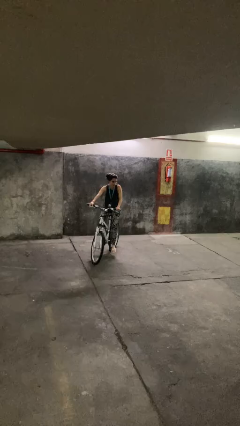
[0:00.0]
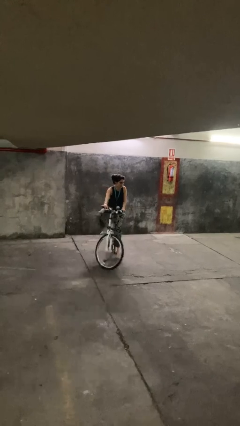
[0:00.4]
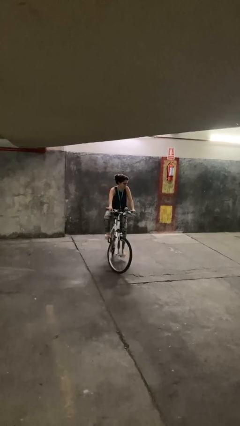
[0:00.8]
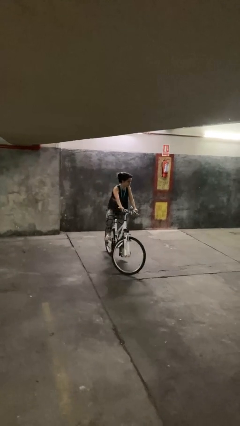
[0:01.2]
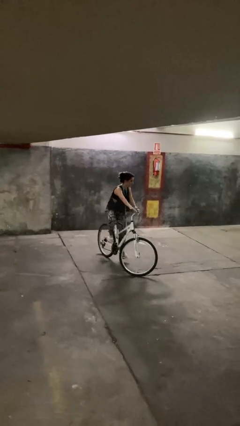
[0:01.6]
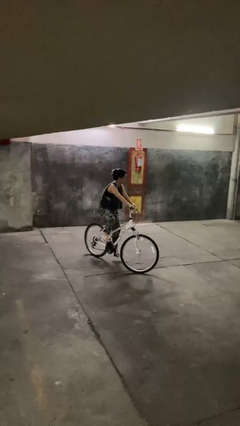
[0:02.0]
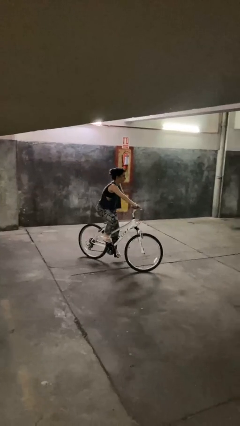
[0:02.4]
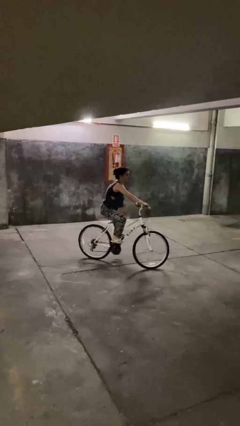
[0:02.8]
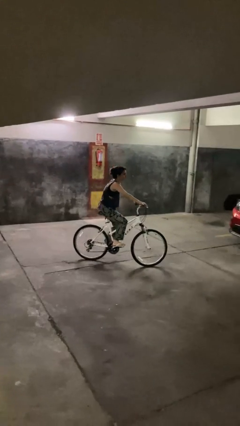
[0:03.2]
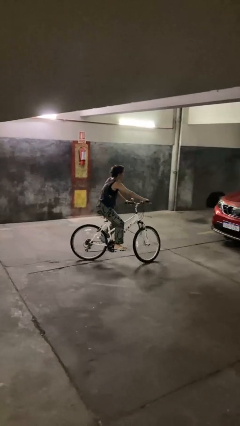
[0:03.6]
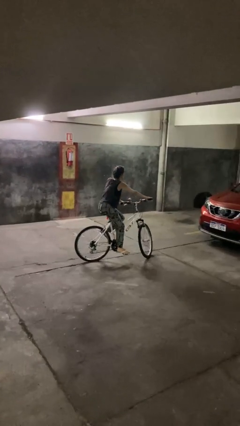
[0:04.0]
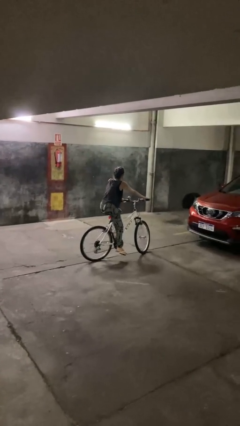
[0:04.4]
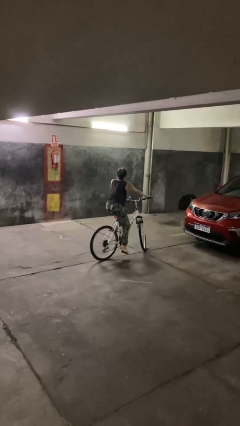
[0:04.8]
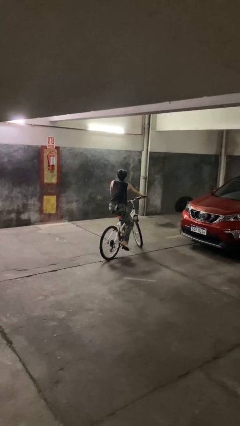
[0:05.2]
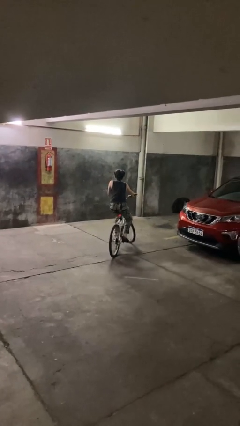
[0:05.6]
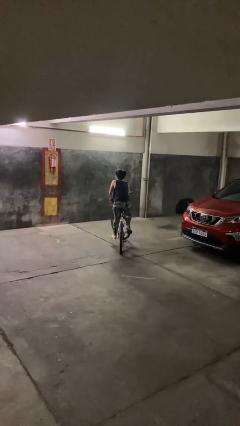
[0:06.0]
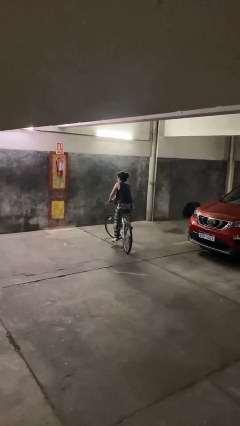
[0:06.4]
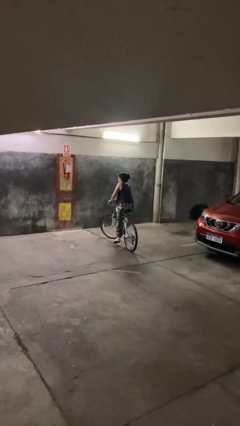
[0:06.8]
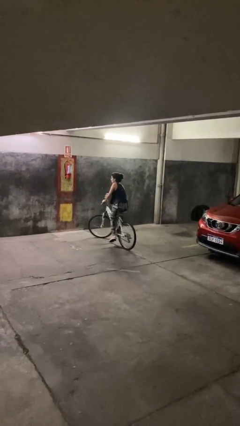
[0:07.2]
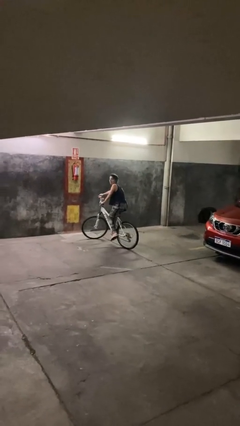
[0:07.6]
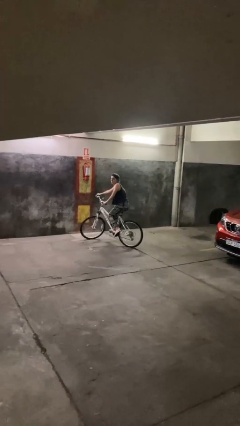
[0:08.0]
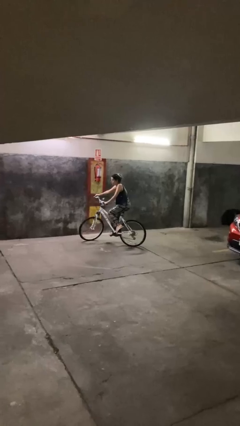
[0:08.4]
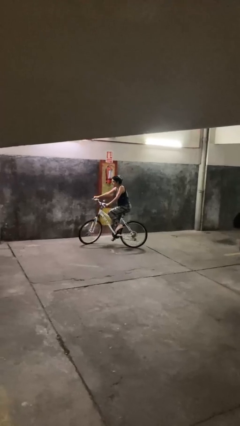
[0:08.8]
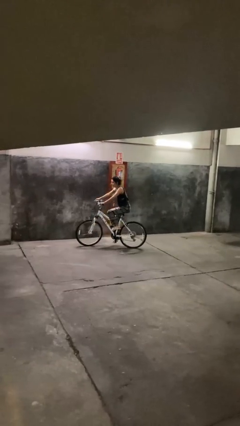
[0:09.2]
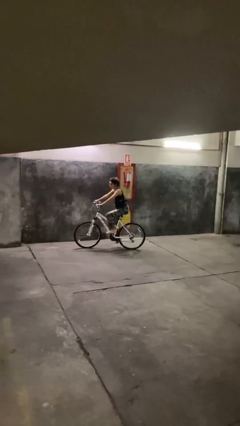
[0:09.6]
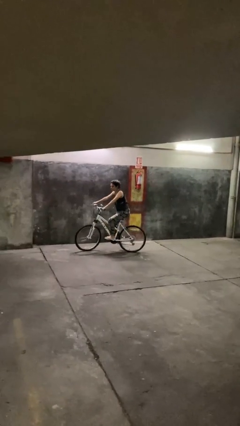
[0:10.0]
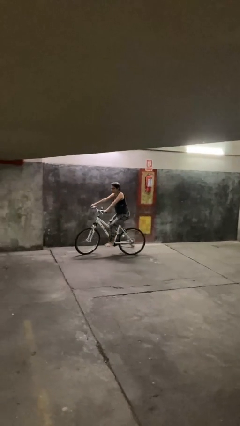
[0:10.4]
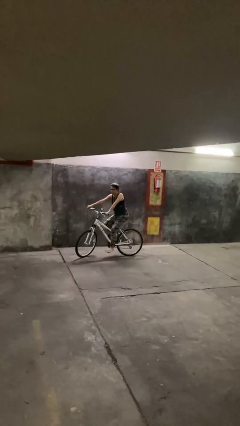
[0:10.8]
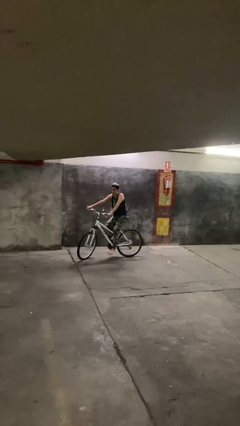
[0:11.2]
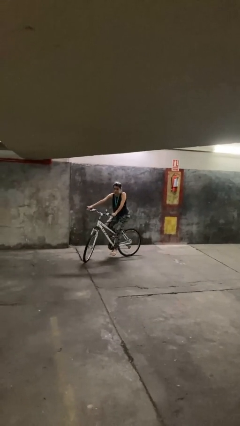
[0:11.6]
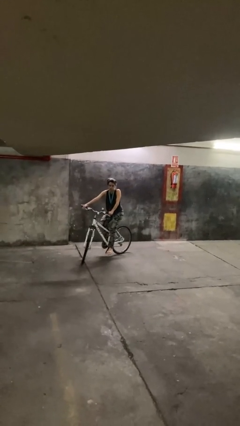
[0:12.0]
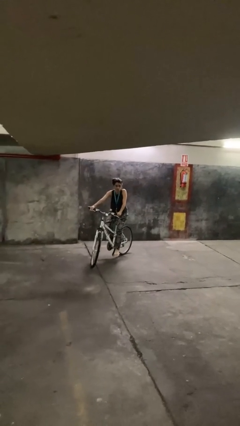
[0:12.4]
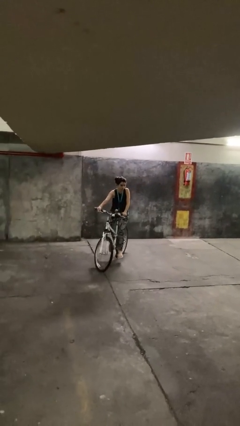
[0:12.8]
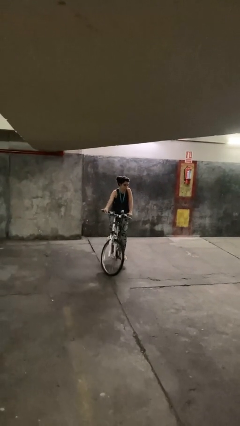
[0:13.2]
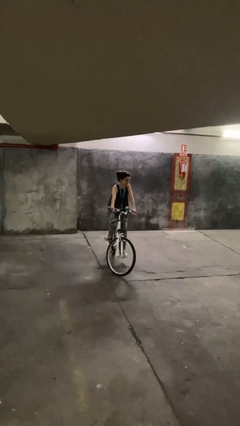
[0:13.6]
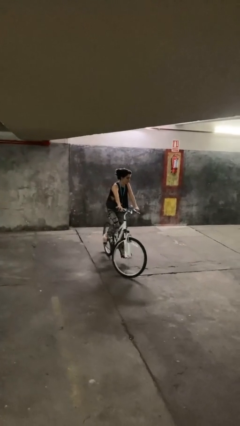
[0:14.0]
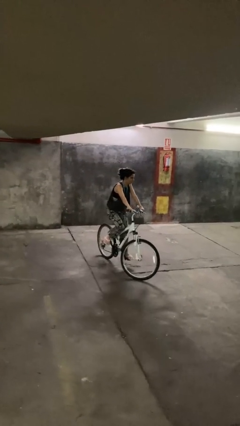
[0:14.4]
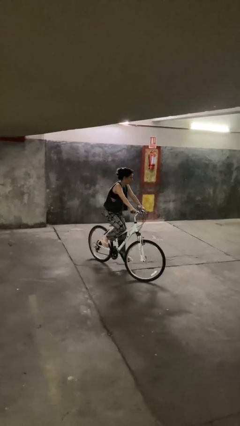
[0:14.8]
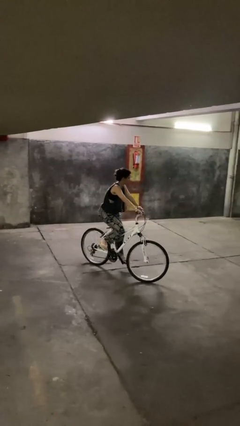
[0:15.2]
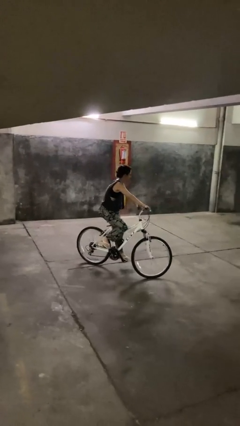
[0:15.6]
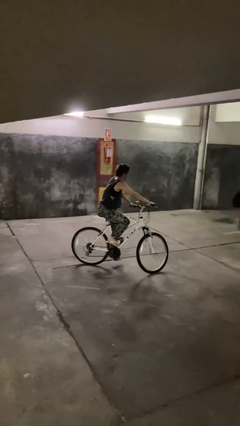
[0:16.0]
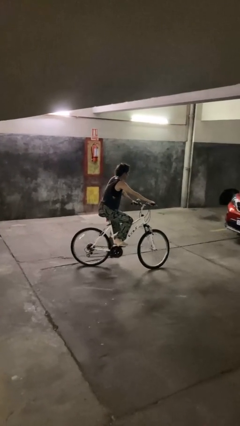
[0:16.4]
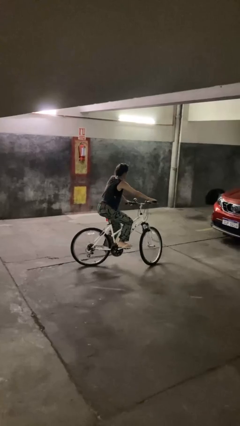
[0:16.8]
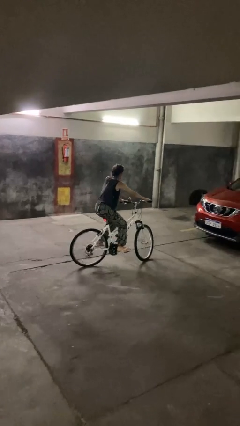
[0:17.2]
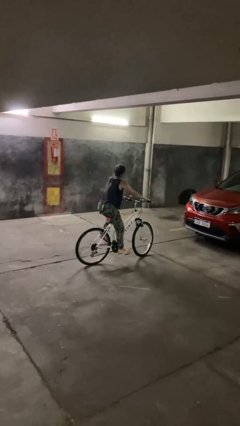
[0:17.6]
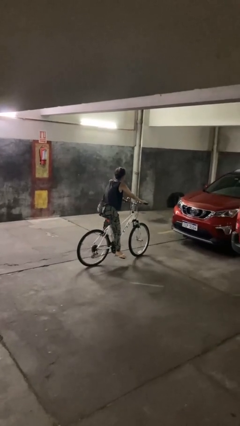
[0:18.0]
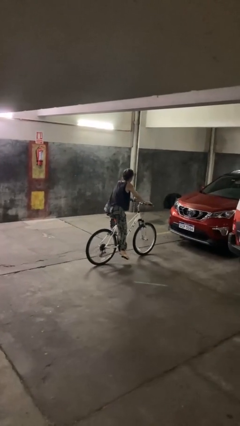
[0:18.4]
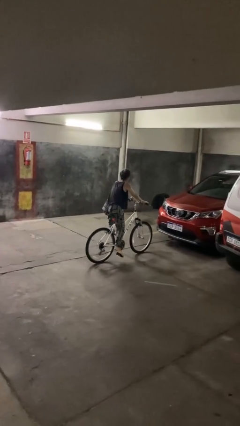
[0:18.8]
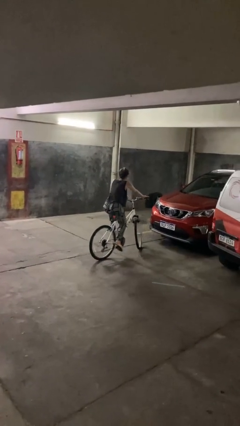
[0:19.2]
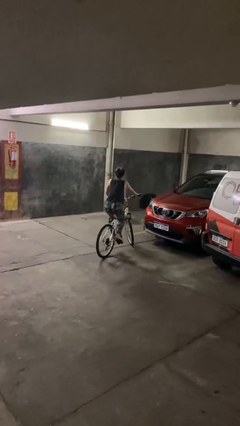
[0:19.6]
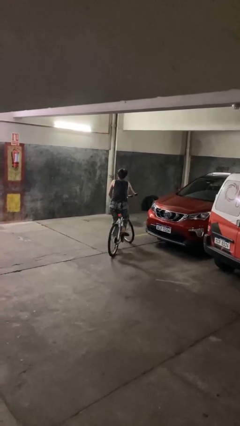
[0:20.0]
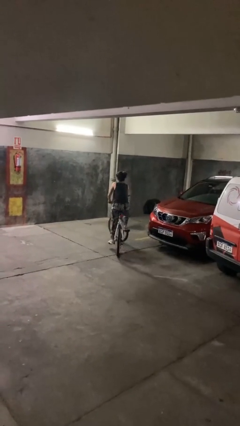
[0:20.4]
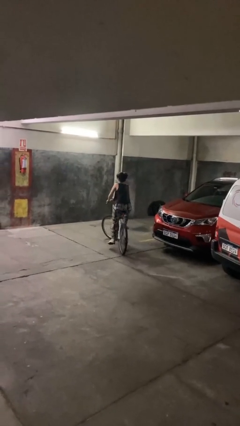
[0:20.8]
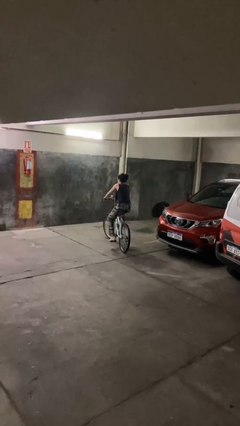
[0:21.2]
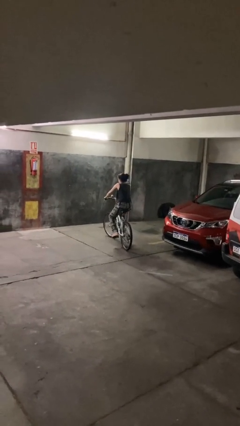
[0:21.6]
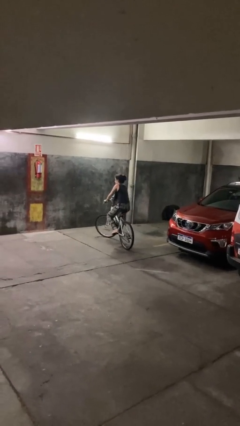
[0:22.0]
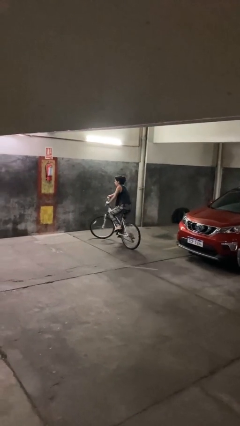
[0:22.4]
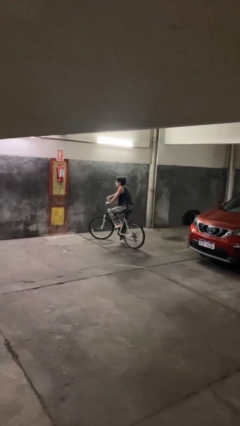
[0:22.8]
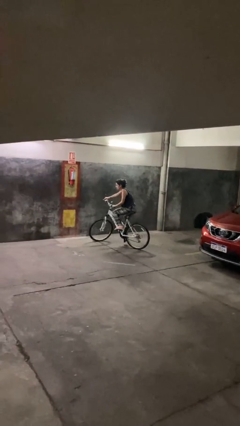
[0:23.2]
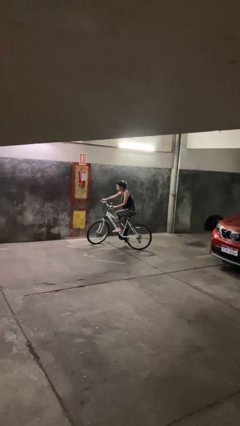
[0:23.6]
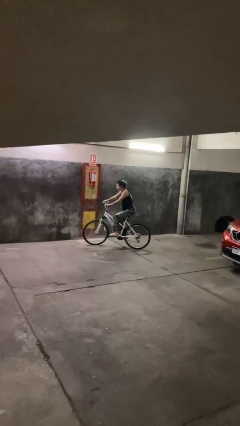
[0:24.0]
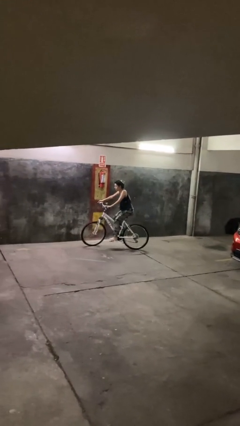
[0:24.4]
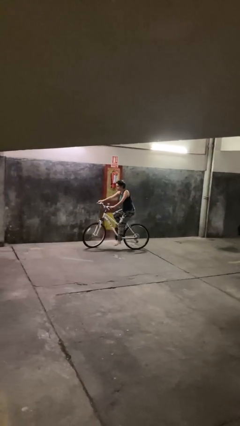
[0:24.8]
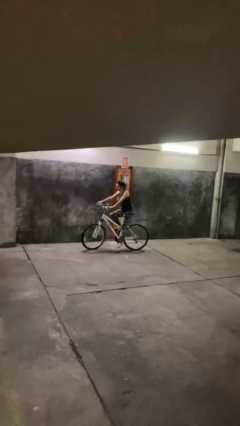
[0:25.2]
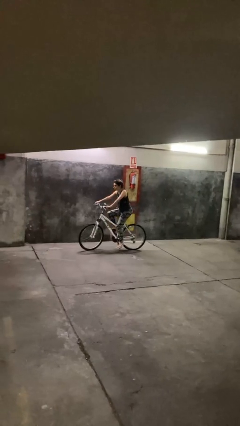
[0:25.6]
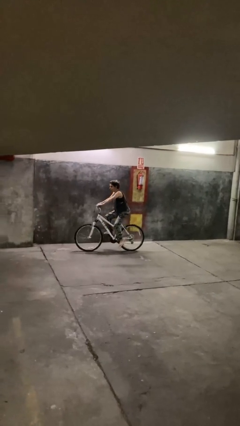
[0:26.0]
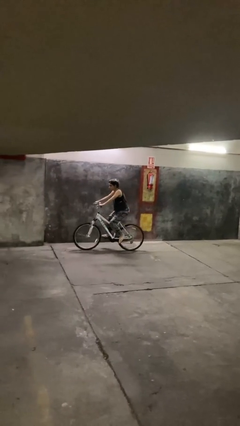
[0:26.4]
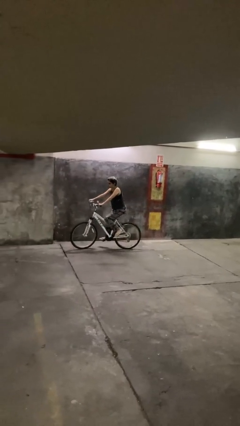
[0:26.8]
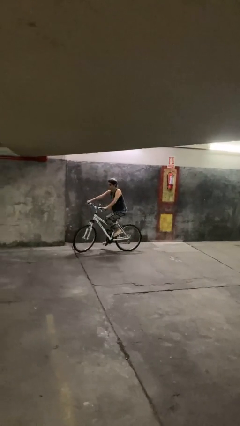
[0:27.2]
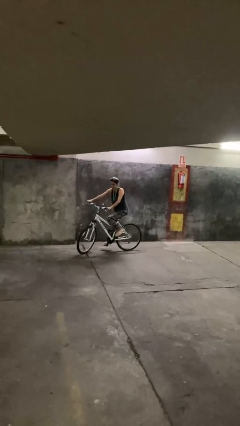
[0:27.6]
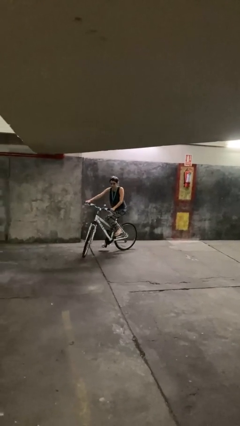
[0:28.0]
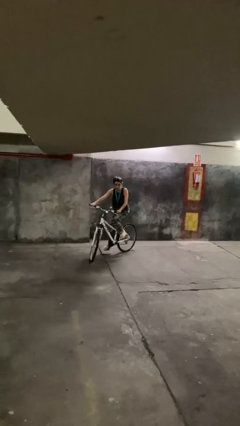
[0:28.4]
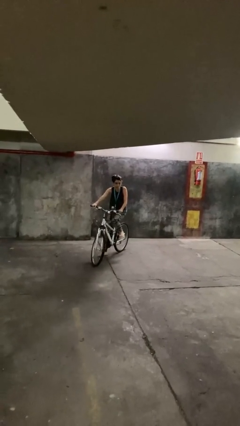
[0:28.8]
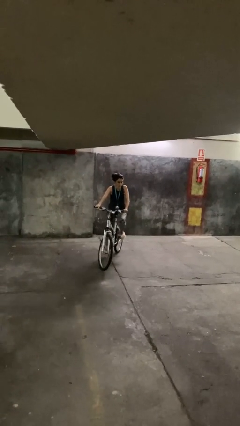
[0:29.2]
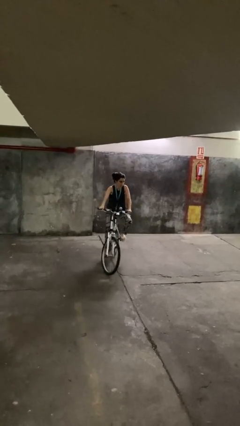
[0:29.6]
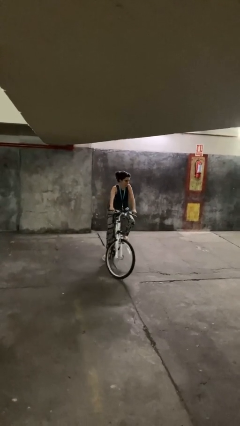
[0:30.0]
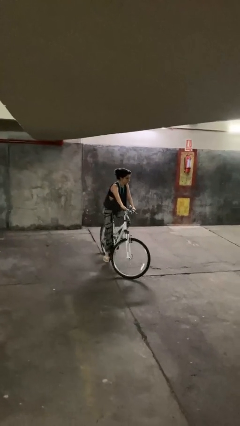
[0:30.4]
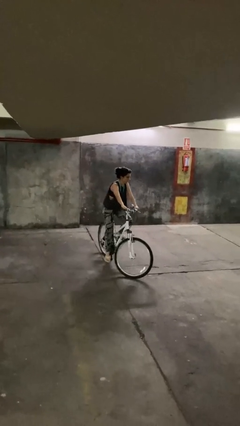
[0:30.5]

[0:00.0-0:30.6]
person rides bicycle

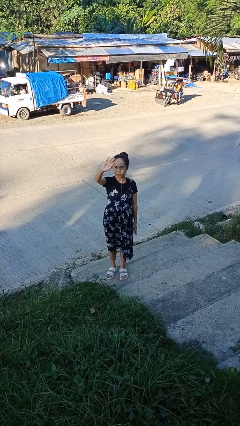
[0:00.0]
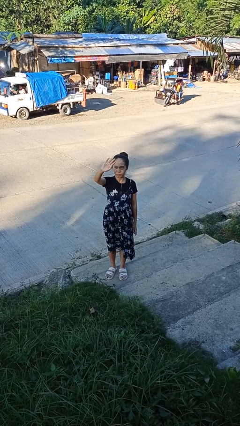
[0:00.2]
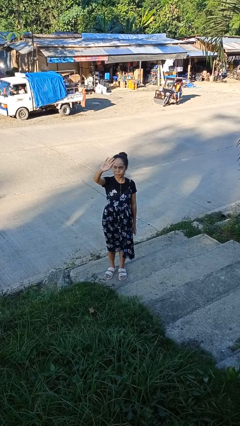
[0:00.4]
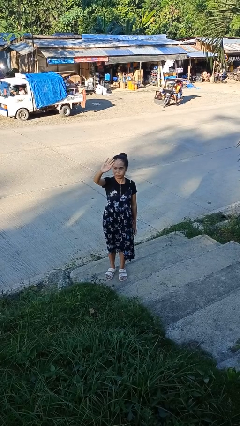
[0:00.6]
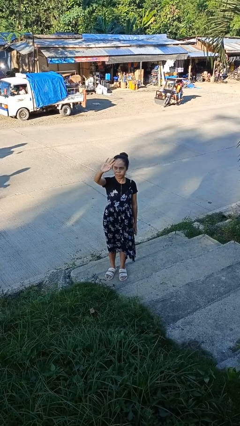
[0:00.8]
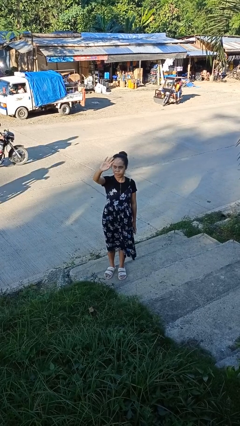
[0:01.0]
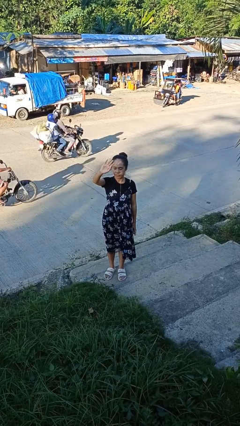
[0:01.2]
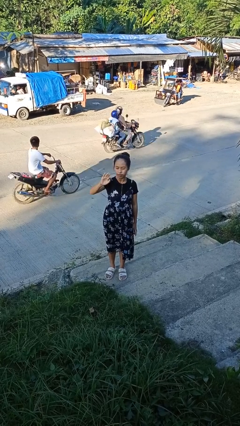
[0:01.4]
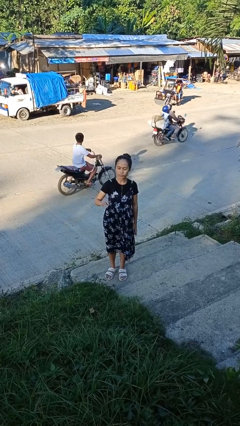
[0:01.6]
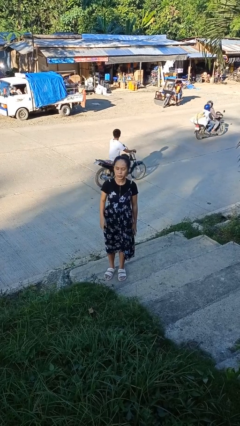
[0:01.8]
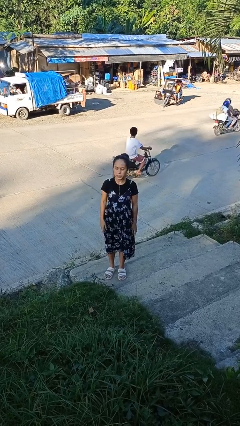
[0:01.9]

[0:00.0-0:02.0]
person shades eyes

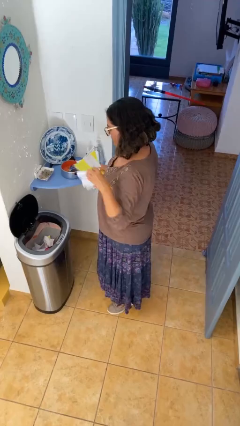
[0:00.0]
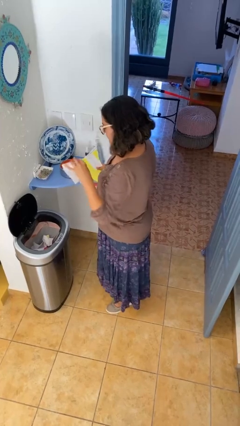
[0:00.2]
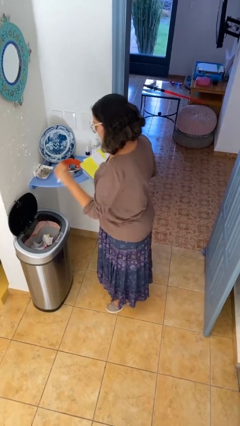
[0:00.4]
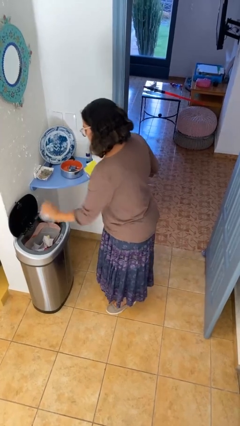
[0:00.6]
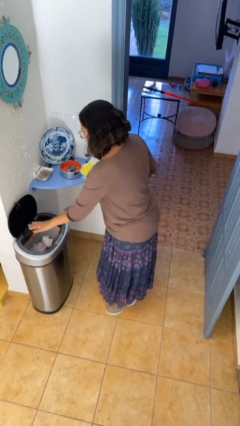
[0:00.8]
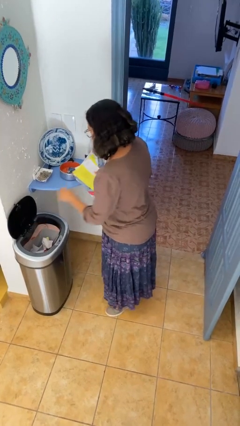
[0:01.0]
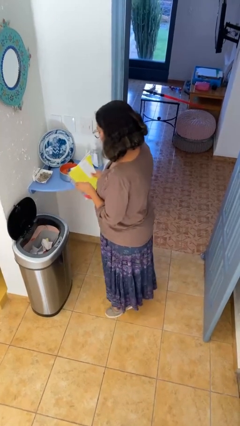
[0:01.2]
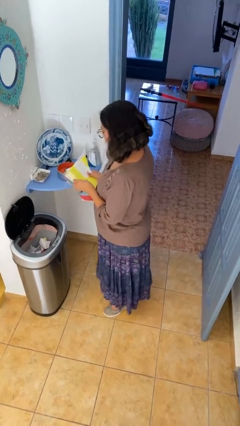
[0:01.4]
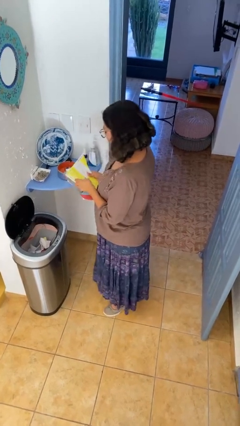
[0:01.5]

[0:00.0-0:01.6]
person discards trash
